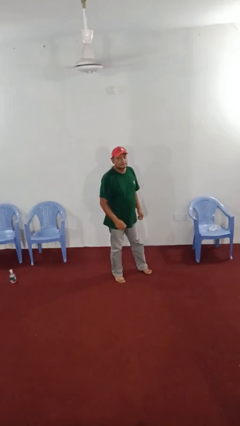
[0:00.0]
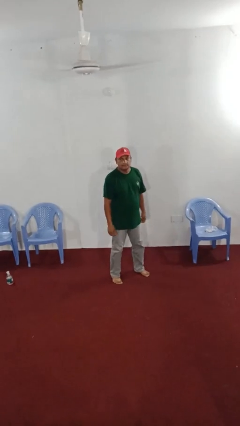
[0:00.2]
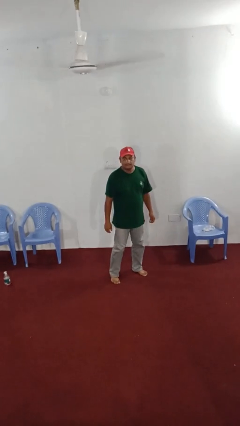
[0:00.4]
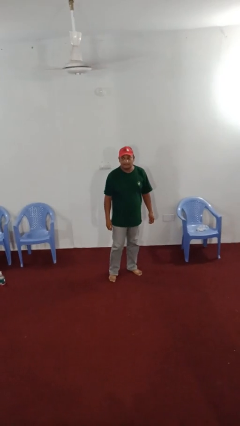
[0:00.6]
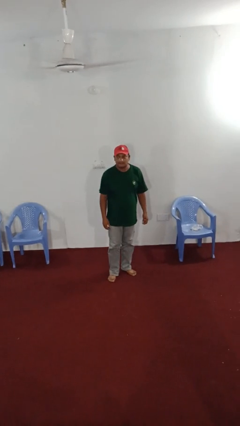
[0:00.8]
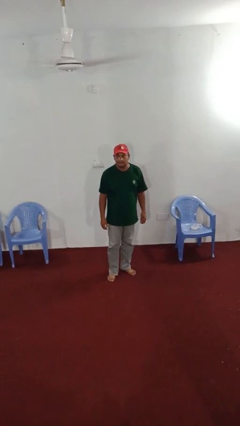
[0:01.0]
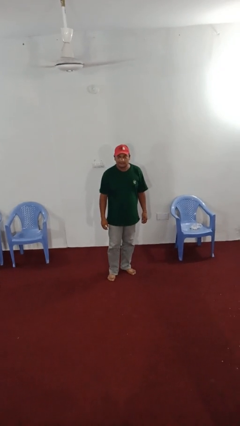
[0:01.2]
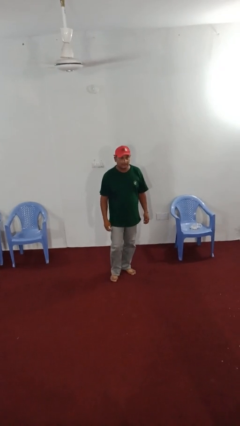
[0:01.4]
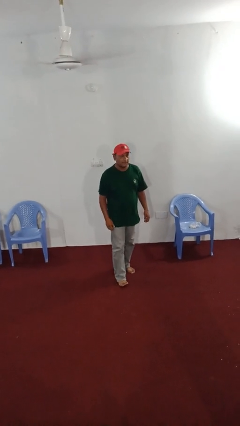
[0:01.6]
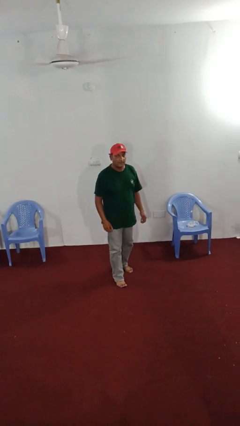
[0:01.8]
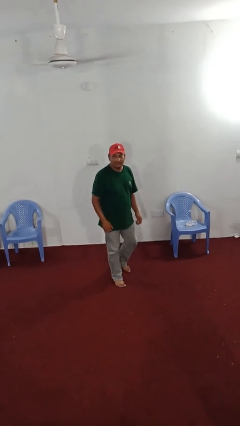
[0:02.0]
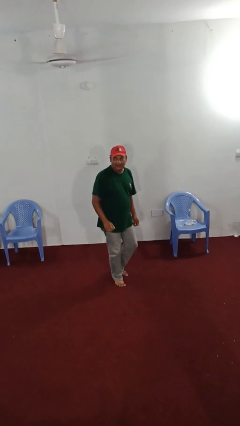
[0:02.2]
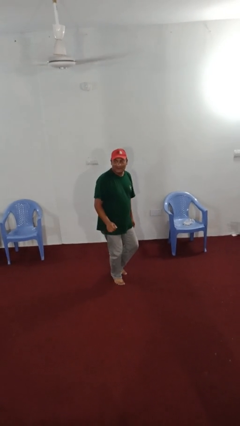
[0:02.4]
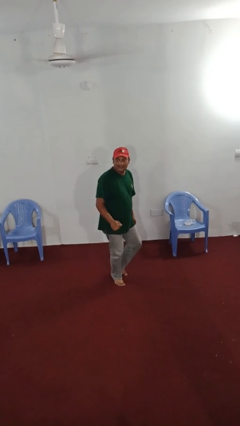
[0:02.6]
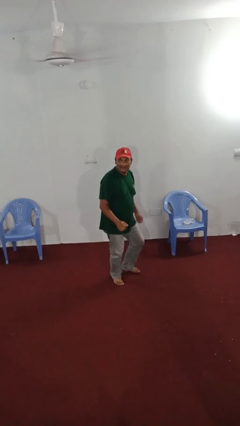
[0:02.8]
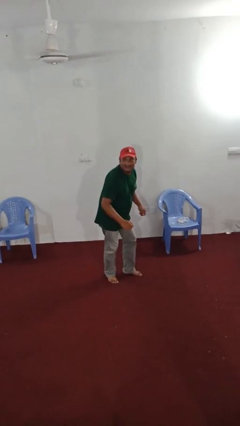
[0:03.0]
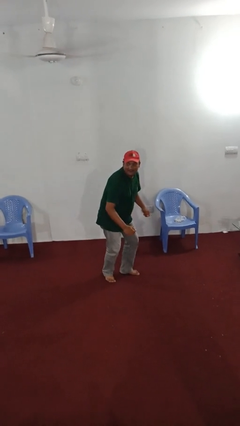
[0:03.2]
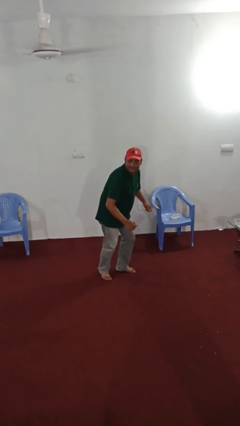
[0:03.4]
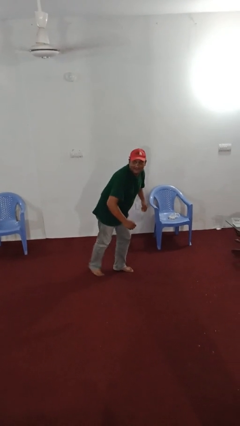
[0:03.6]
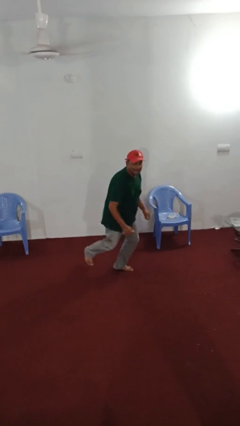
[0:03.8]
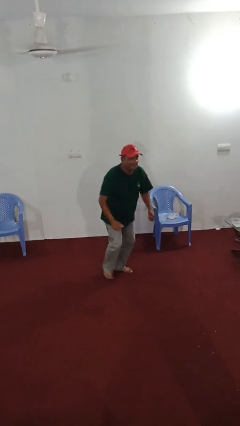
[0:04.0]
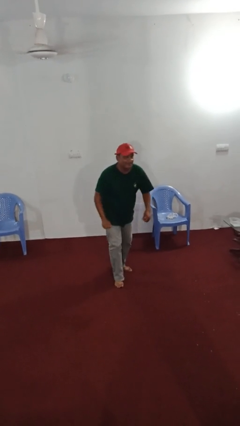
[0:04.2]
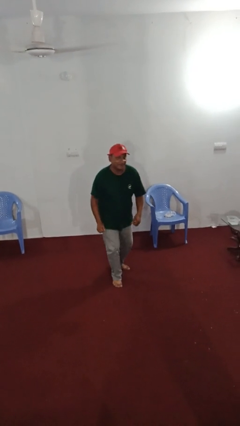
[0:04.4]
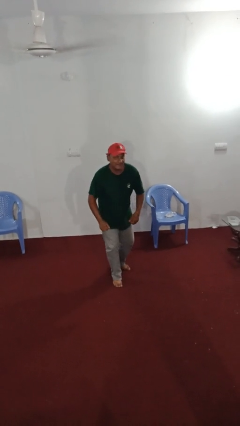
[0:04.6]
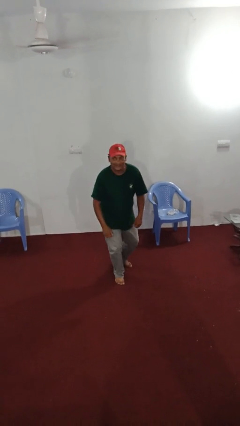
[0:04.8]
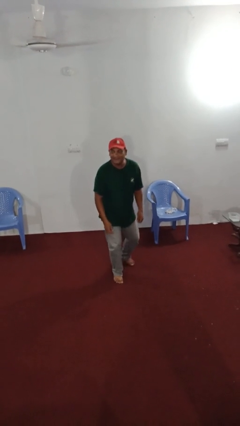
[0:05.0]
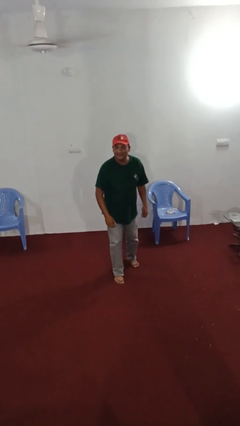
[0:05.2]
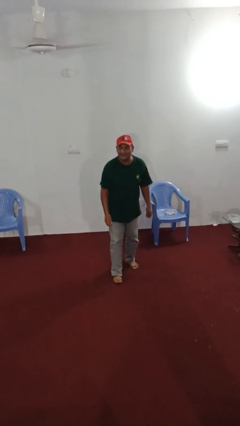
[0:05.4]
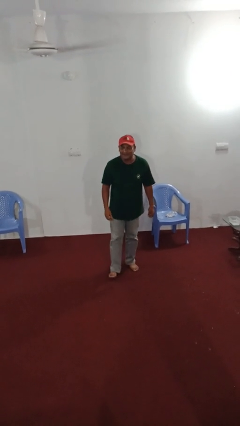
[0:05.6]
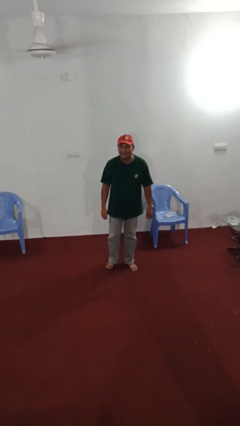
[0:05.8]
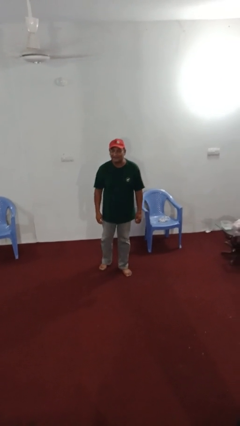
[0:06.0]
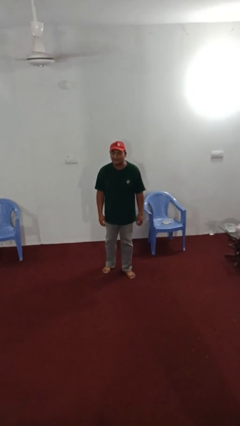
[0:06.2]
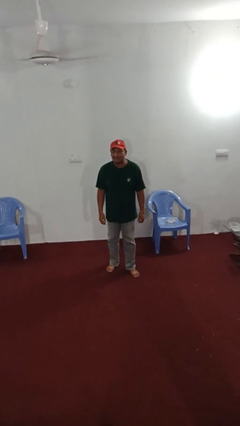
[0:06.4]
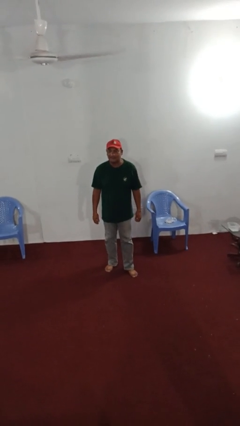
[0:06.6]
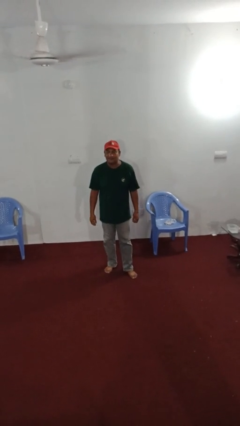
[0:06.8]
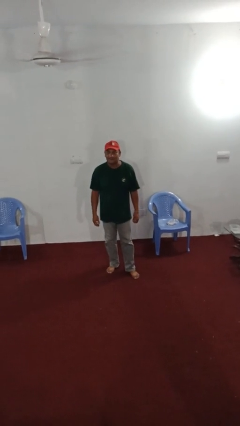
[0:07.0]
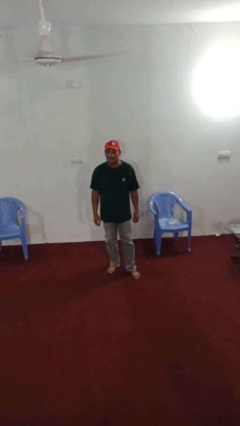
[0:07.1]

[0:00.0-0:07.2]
person dances in place

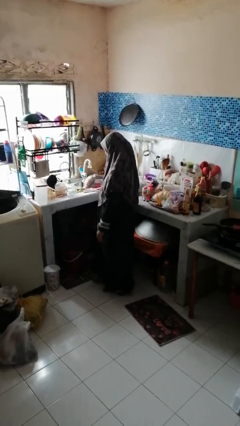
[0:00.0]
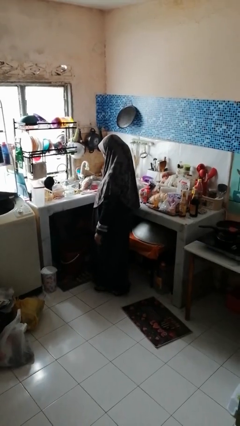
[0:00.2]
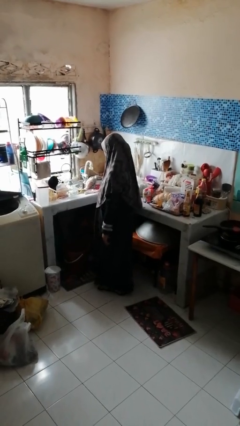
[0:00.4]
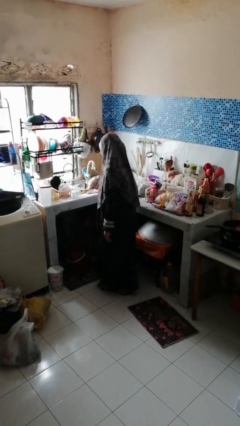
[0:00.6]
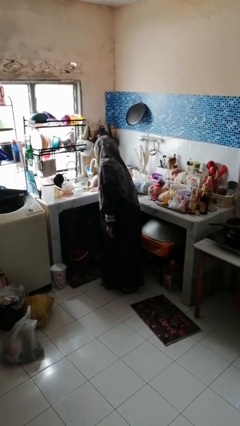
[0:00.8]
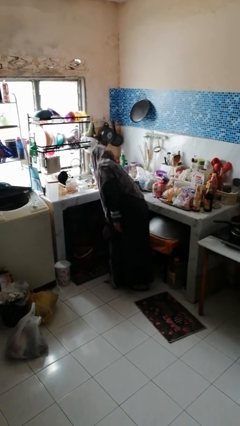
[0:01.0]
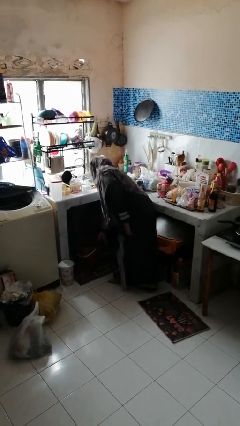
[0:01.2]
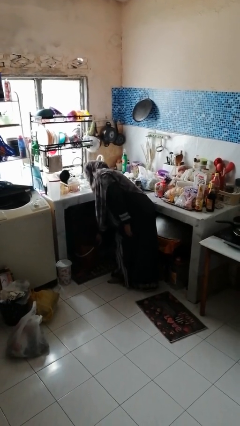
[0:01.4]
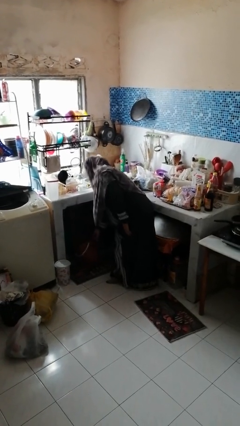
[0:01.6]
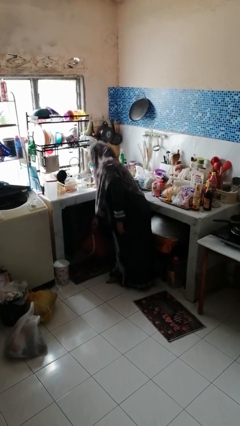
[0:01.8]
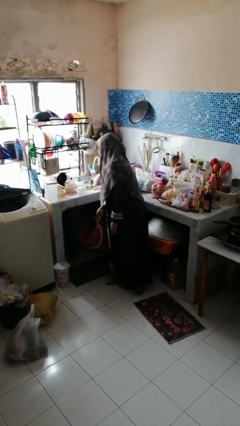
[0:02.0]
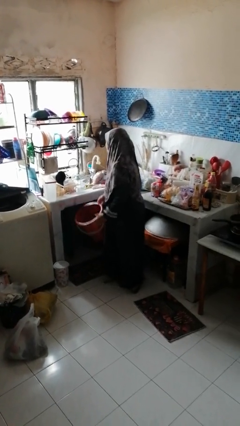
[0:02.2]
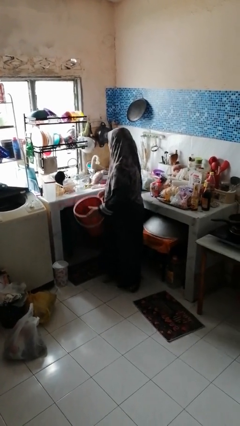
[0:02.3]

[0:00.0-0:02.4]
person picks up object from cabinet

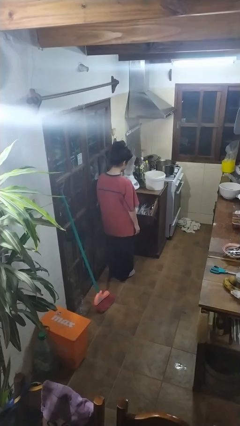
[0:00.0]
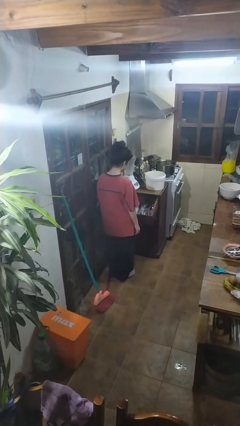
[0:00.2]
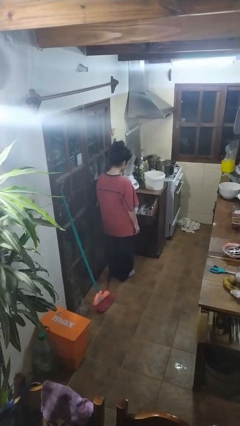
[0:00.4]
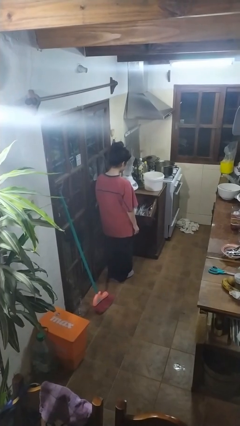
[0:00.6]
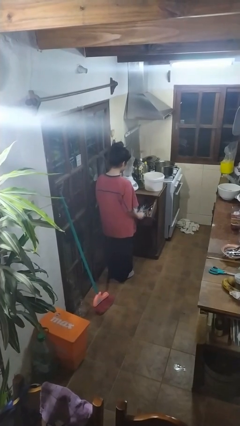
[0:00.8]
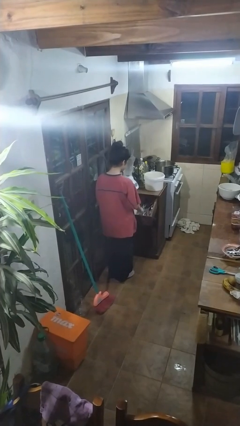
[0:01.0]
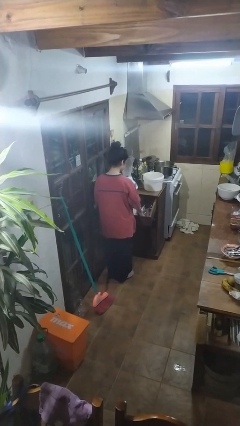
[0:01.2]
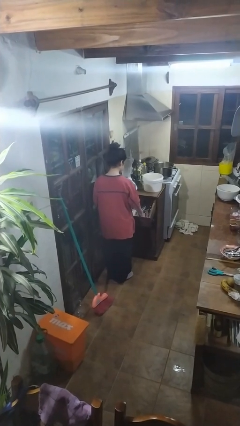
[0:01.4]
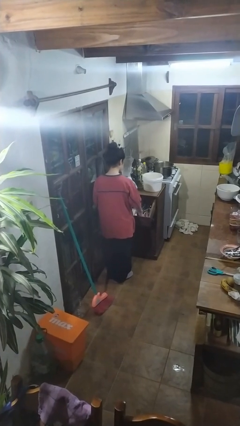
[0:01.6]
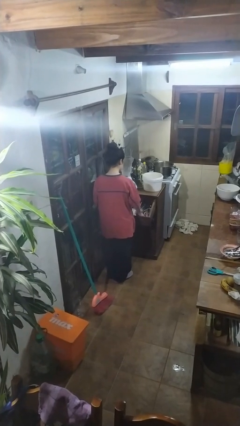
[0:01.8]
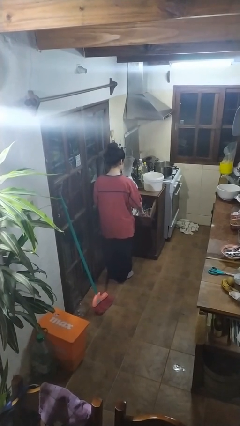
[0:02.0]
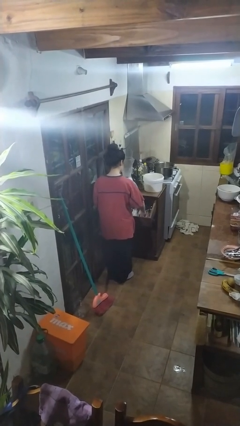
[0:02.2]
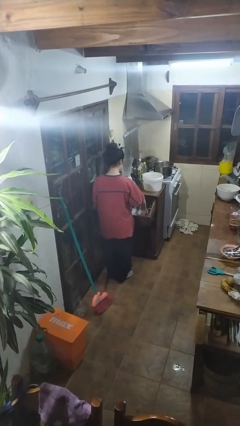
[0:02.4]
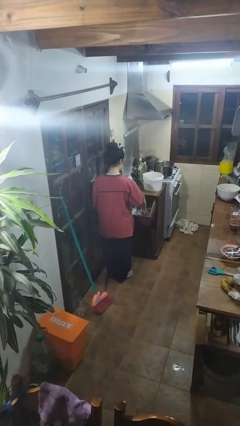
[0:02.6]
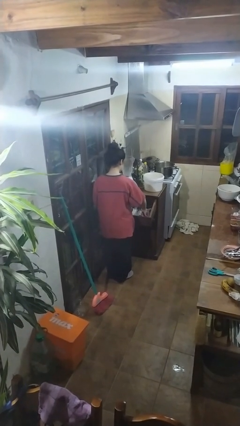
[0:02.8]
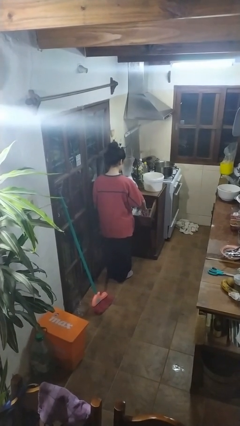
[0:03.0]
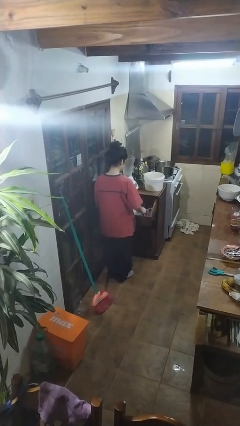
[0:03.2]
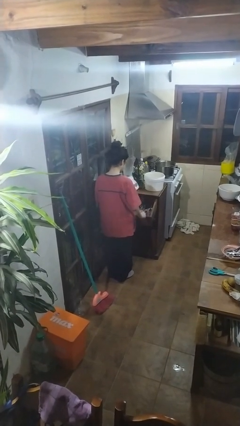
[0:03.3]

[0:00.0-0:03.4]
person searches in kitchen drawer

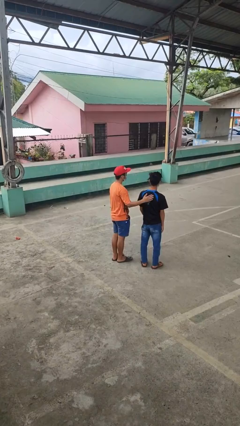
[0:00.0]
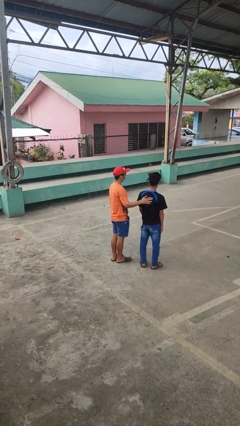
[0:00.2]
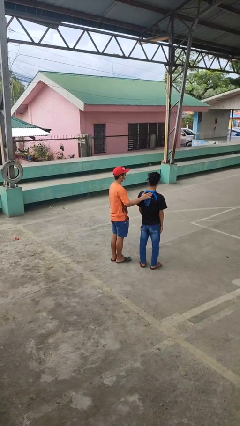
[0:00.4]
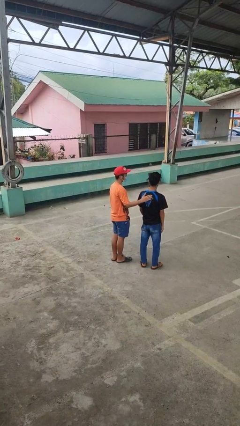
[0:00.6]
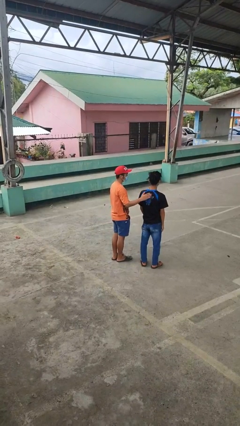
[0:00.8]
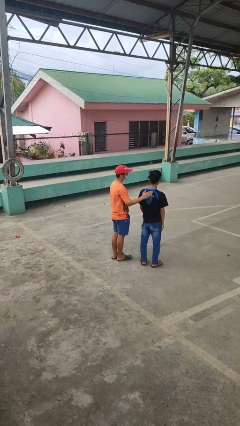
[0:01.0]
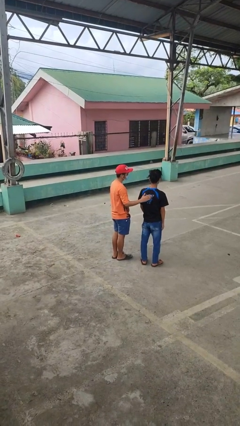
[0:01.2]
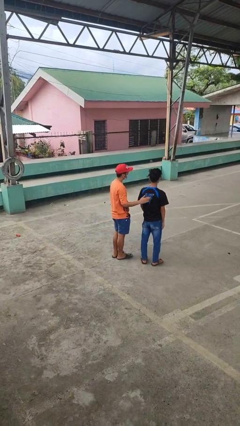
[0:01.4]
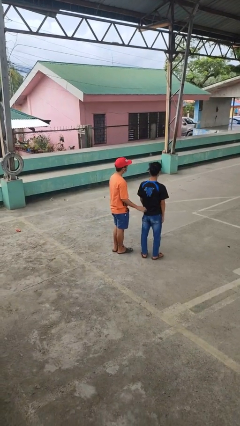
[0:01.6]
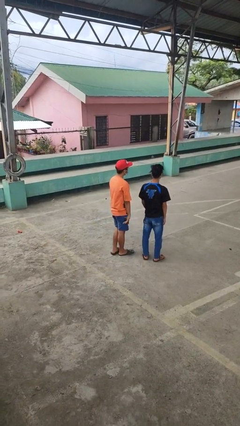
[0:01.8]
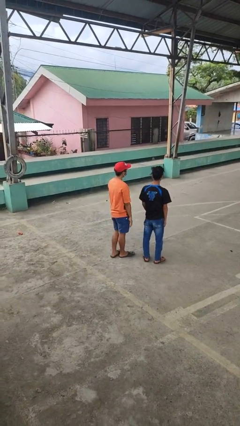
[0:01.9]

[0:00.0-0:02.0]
person touches back of person

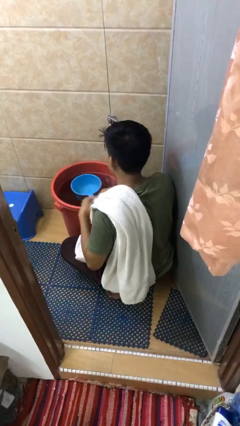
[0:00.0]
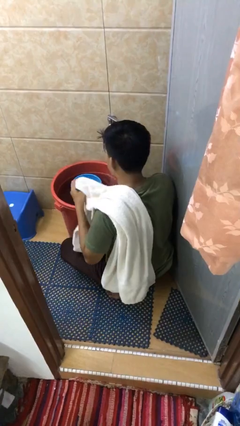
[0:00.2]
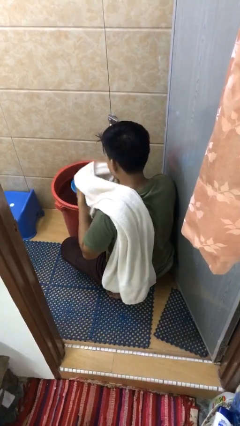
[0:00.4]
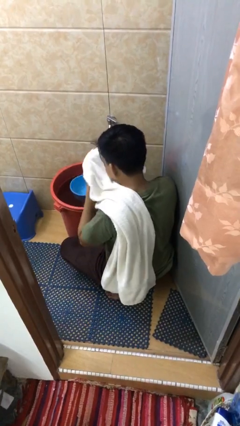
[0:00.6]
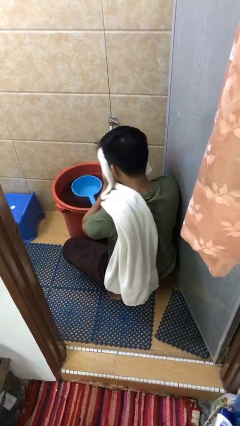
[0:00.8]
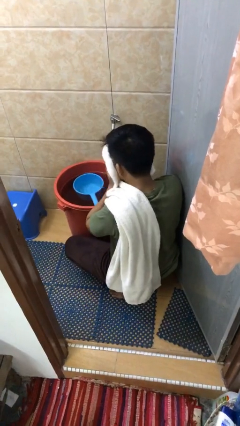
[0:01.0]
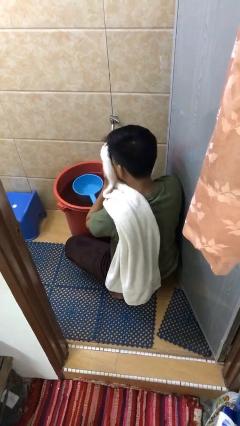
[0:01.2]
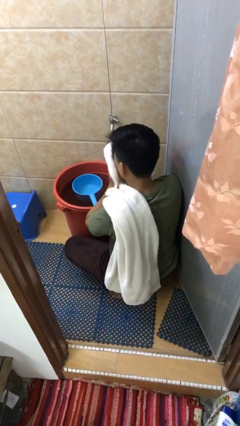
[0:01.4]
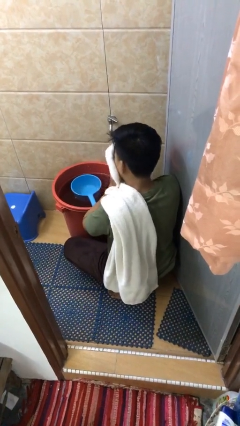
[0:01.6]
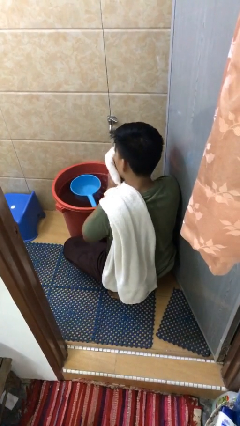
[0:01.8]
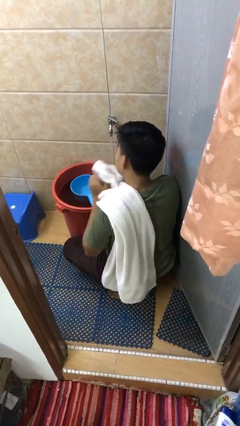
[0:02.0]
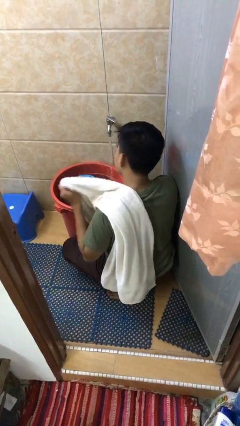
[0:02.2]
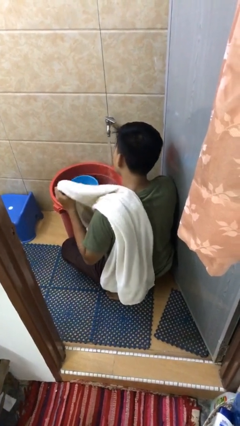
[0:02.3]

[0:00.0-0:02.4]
person dries face with towel

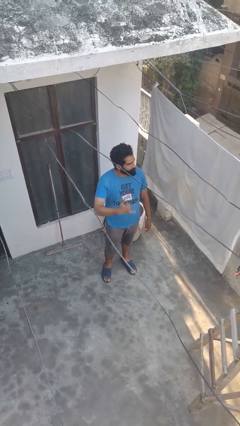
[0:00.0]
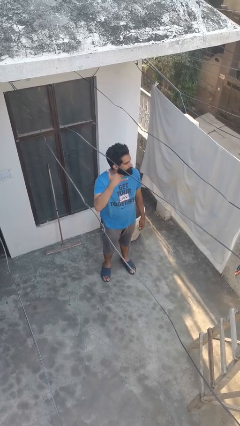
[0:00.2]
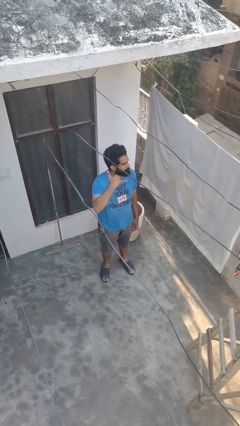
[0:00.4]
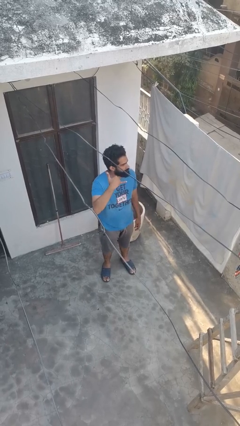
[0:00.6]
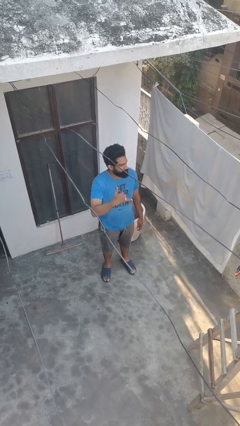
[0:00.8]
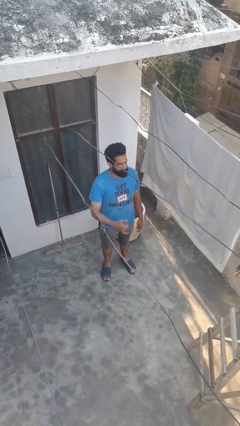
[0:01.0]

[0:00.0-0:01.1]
person gestures call me
